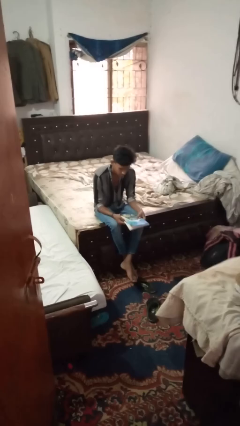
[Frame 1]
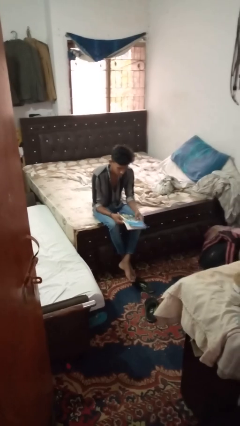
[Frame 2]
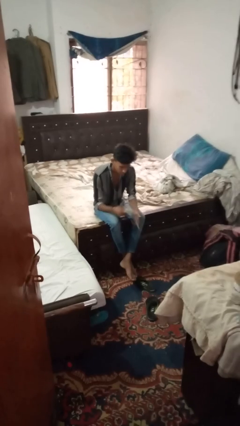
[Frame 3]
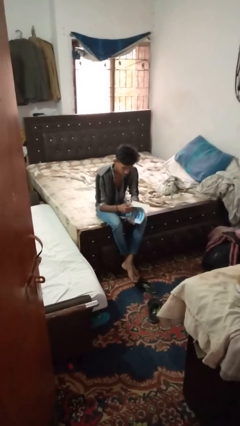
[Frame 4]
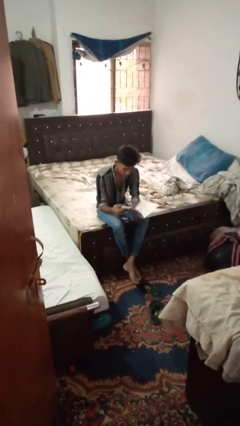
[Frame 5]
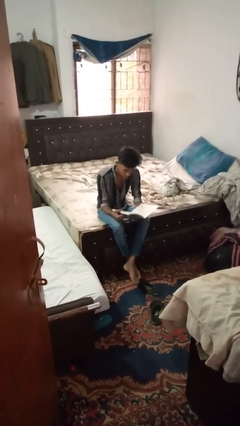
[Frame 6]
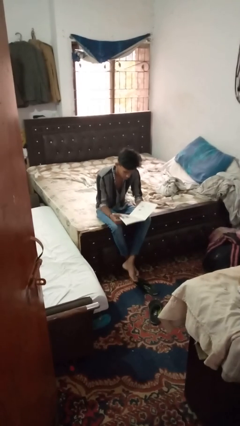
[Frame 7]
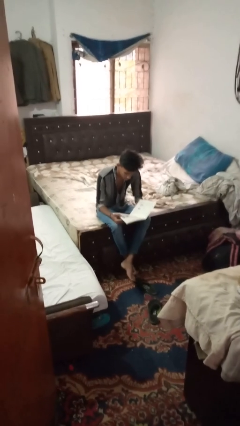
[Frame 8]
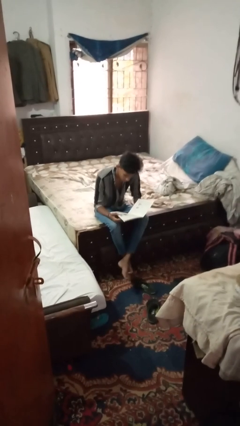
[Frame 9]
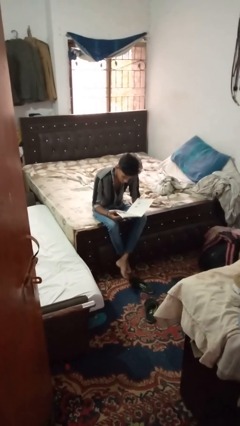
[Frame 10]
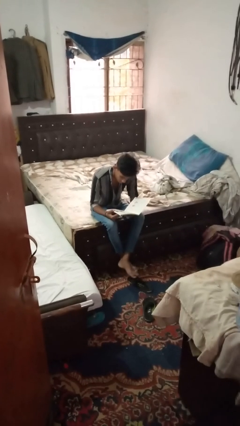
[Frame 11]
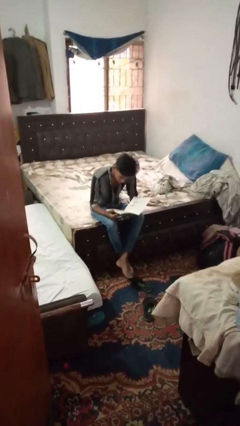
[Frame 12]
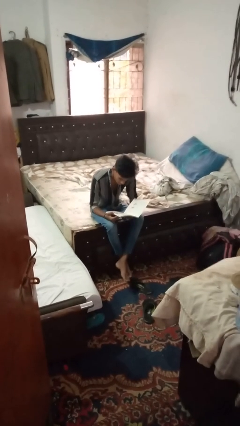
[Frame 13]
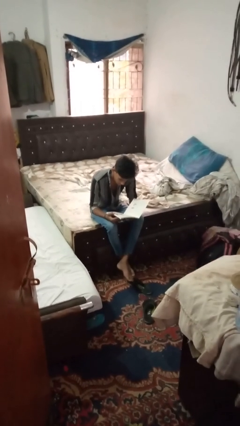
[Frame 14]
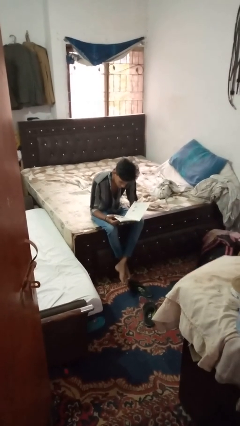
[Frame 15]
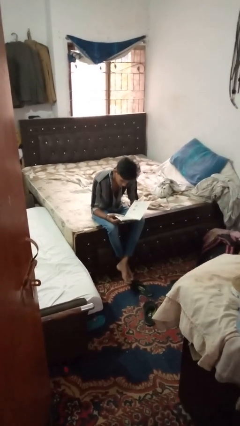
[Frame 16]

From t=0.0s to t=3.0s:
person reads book

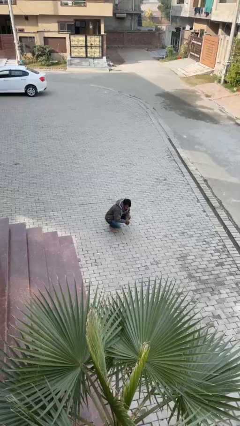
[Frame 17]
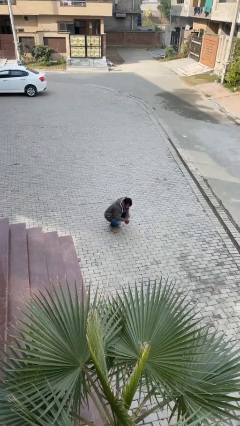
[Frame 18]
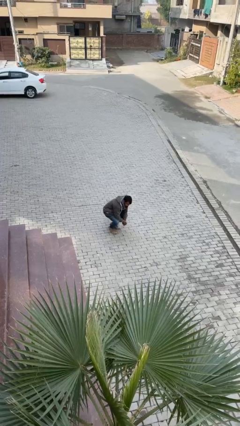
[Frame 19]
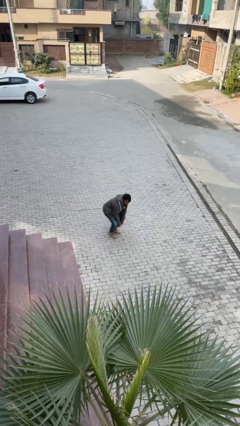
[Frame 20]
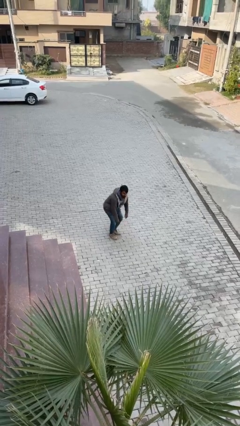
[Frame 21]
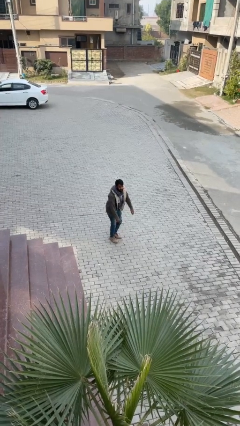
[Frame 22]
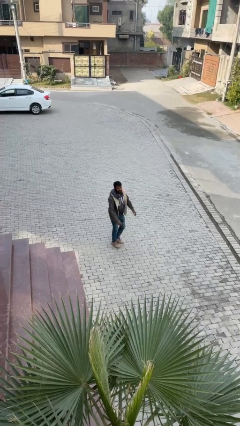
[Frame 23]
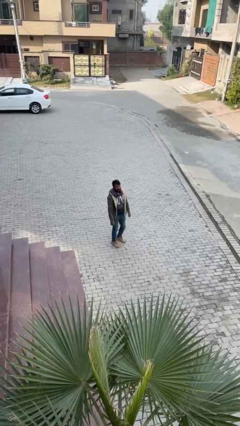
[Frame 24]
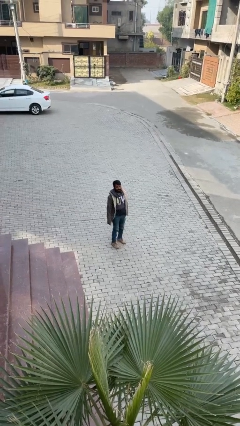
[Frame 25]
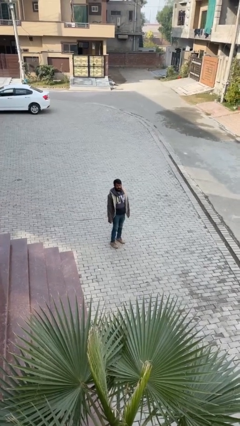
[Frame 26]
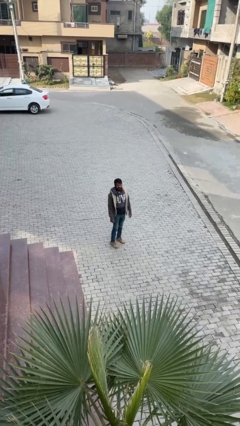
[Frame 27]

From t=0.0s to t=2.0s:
person stands up

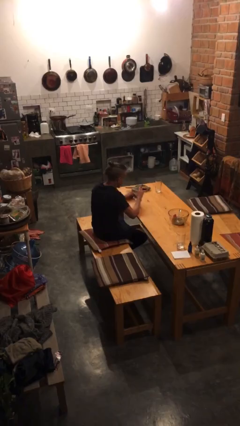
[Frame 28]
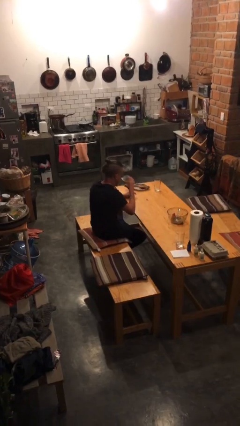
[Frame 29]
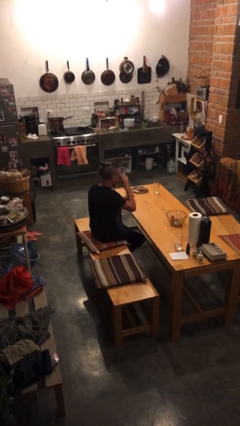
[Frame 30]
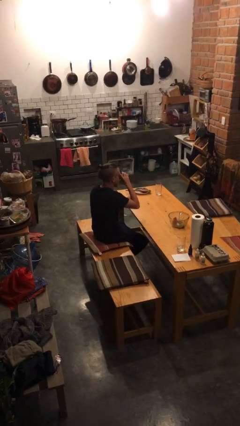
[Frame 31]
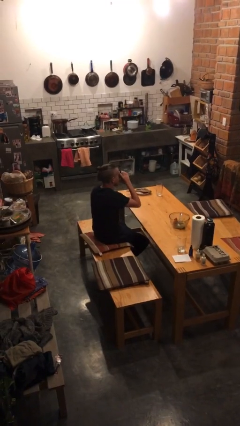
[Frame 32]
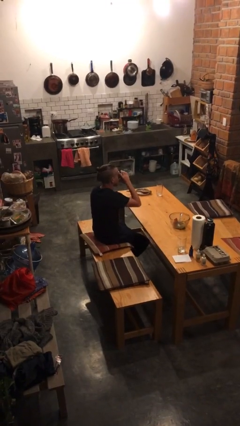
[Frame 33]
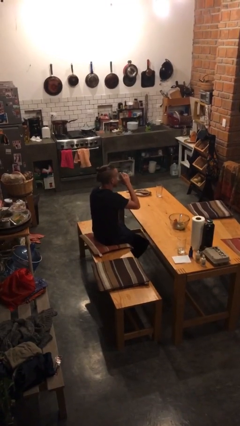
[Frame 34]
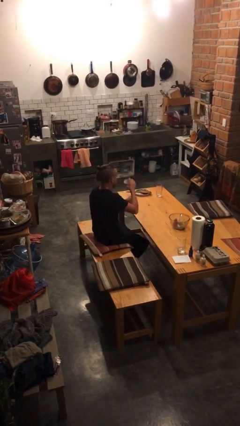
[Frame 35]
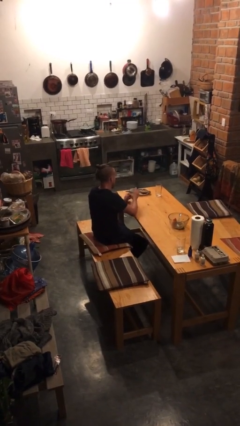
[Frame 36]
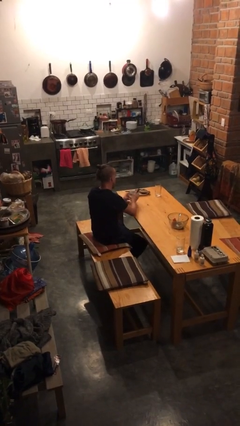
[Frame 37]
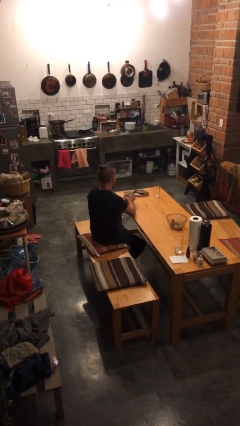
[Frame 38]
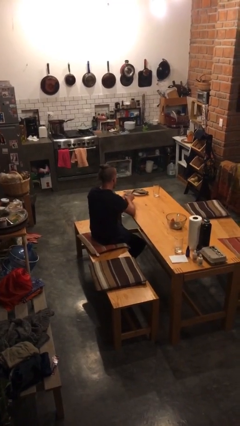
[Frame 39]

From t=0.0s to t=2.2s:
person drinks from mug

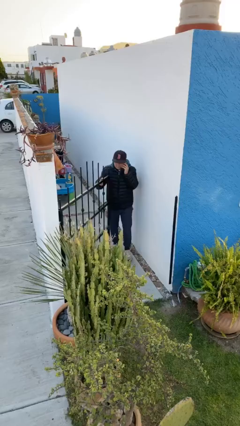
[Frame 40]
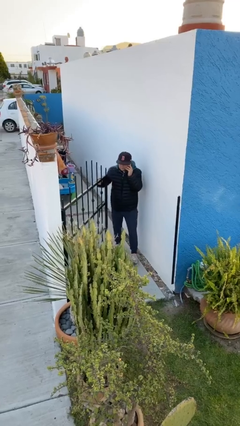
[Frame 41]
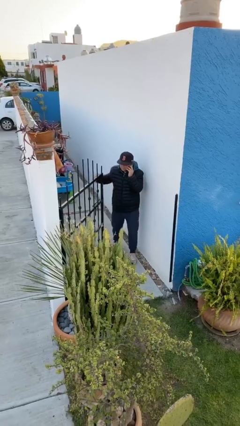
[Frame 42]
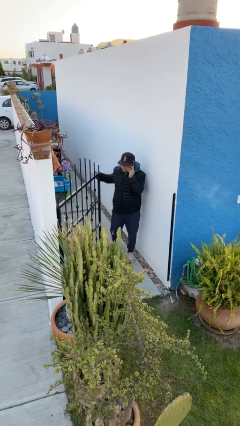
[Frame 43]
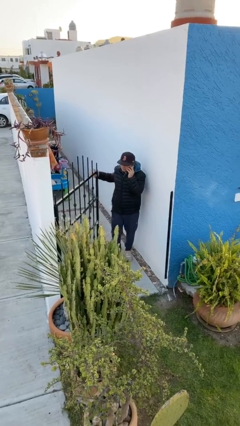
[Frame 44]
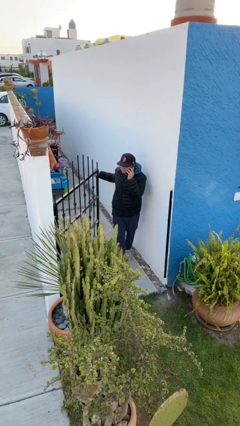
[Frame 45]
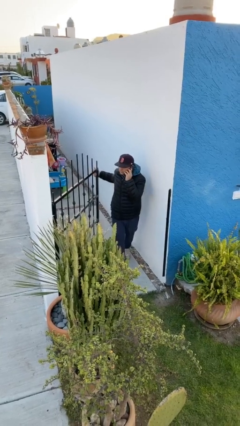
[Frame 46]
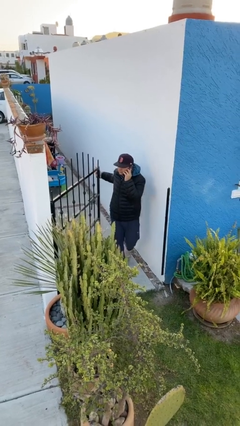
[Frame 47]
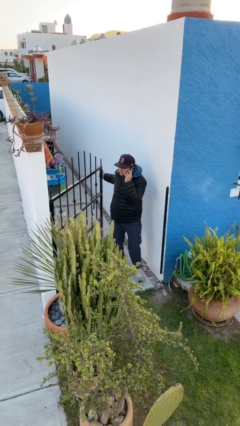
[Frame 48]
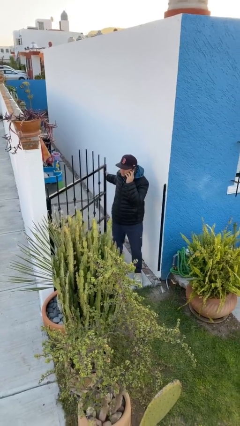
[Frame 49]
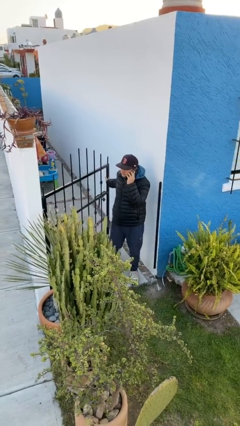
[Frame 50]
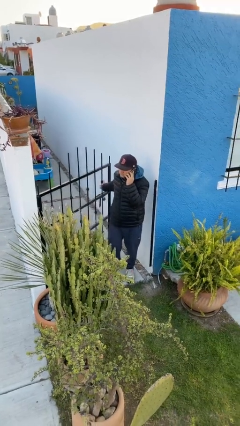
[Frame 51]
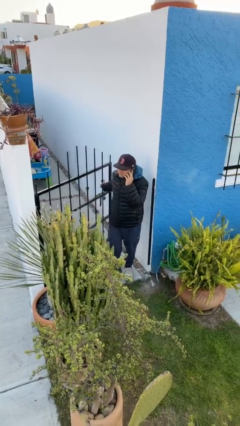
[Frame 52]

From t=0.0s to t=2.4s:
person enters scene through structure

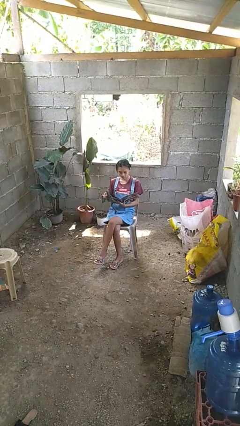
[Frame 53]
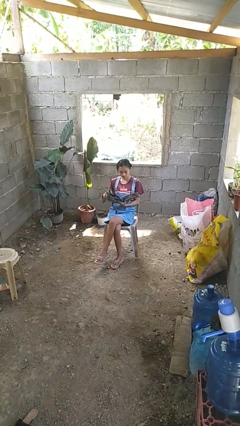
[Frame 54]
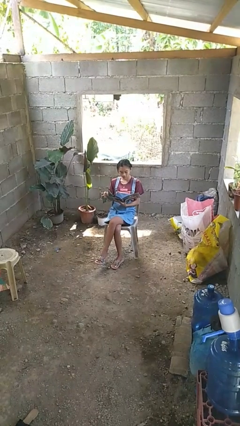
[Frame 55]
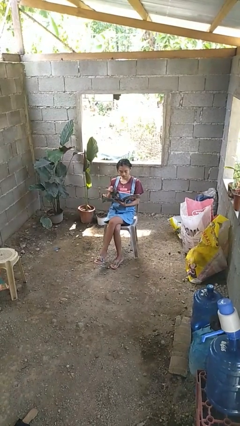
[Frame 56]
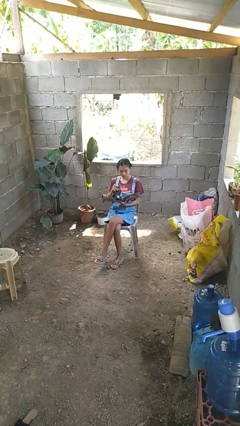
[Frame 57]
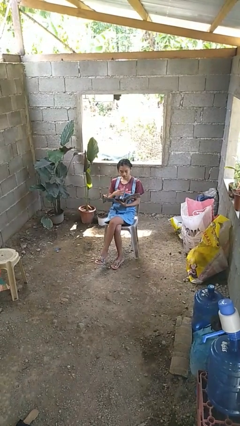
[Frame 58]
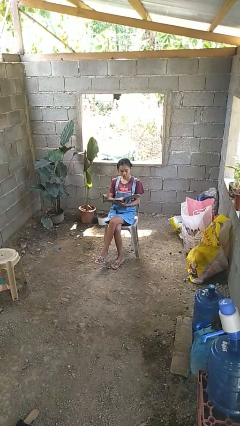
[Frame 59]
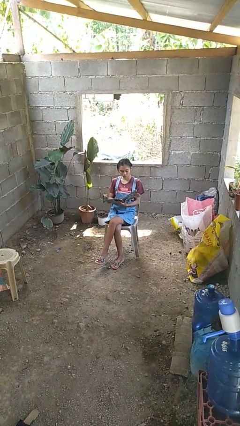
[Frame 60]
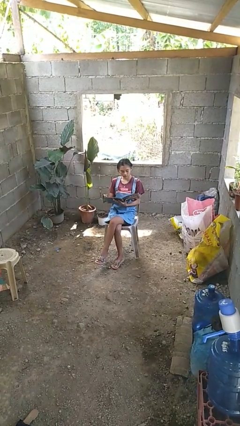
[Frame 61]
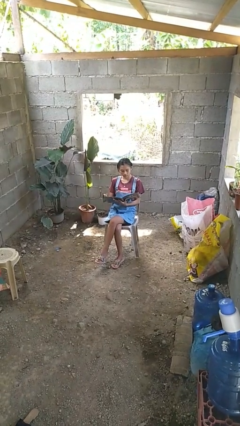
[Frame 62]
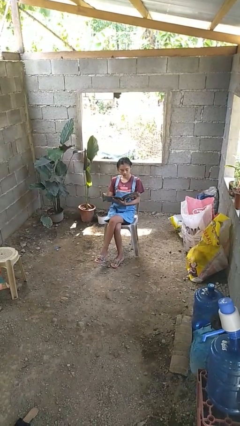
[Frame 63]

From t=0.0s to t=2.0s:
person reads magazine

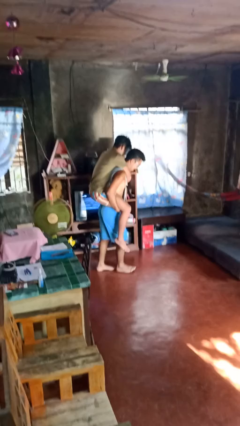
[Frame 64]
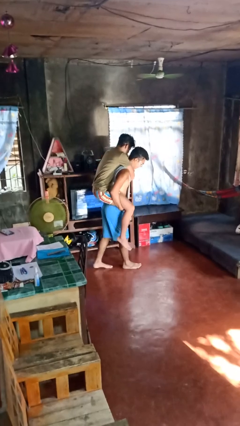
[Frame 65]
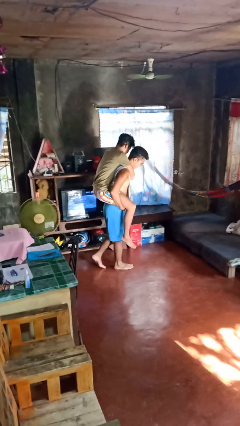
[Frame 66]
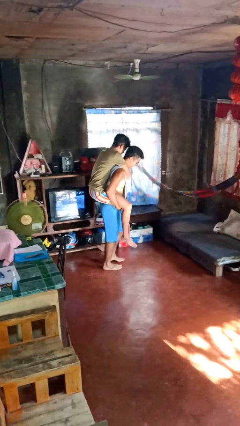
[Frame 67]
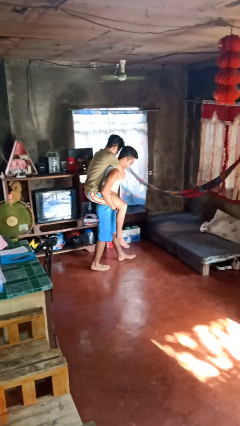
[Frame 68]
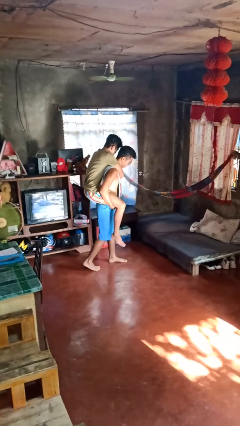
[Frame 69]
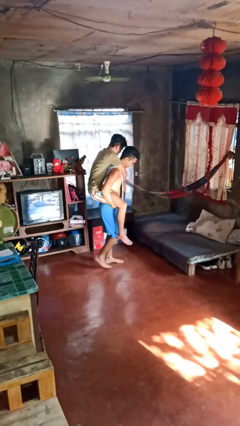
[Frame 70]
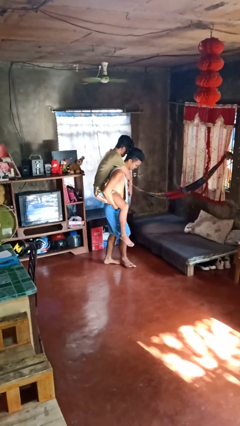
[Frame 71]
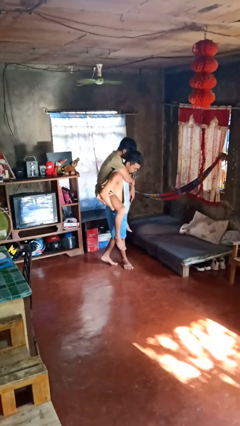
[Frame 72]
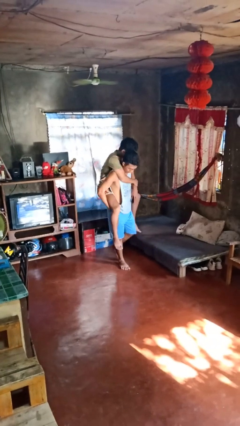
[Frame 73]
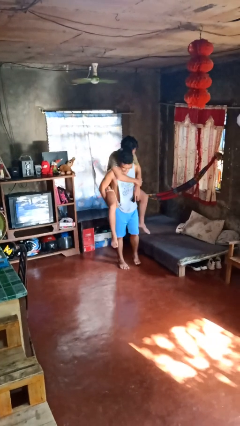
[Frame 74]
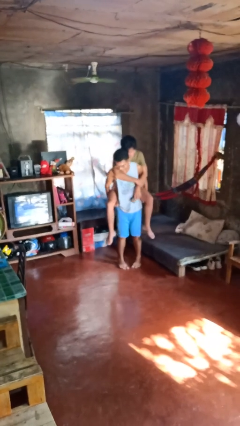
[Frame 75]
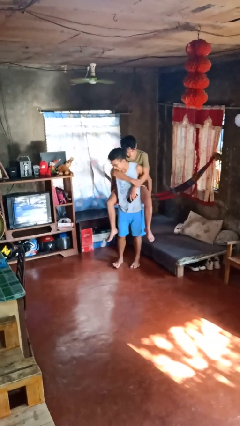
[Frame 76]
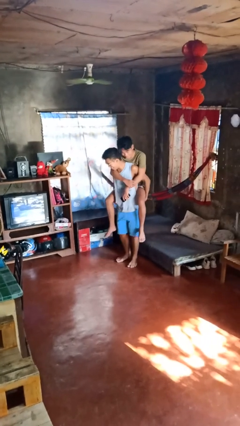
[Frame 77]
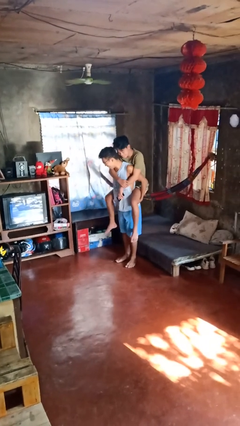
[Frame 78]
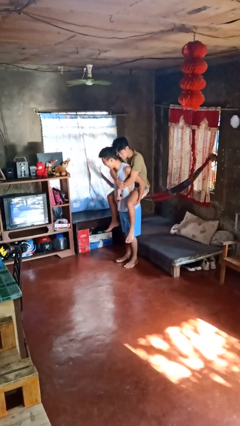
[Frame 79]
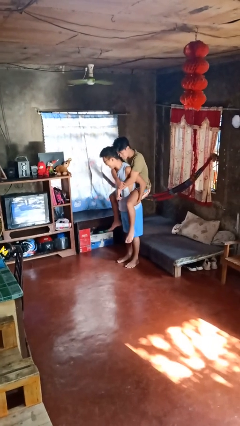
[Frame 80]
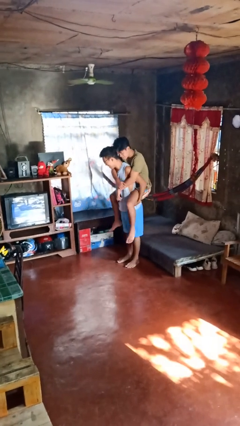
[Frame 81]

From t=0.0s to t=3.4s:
person carries person on back

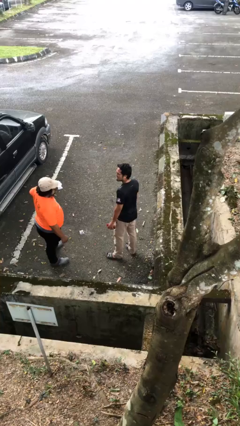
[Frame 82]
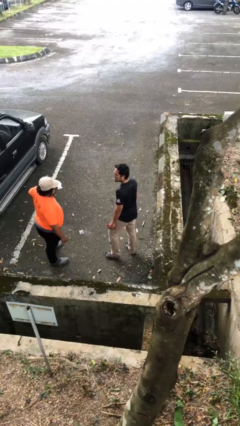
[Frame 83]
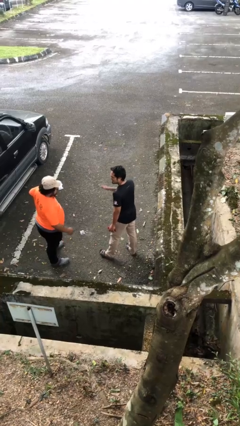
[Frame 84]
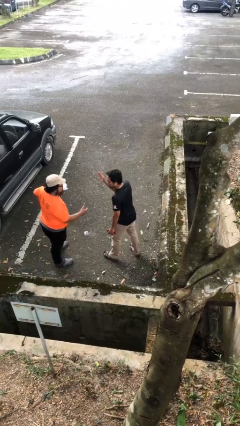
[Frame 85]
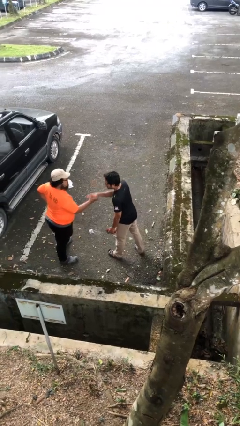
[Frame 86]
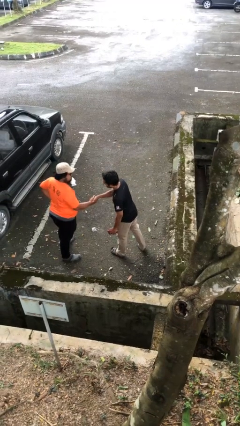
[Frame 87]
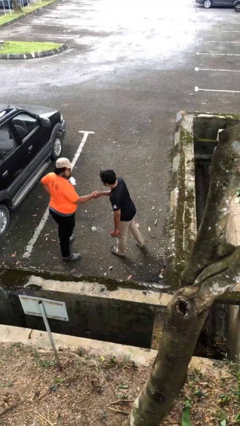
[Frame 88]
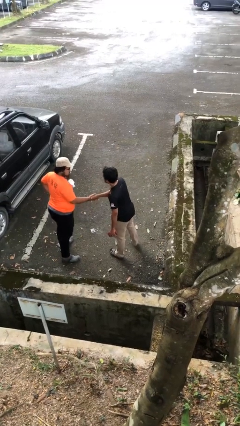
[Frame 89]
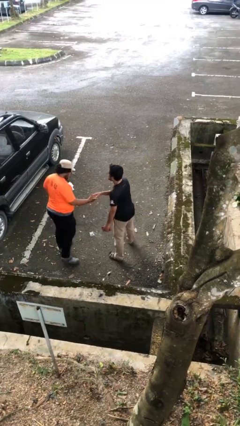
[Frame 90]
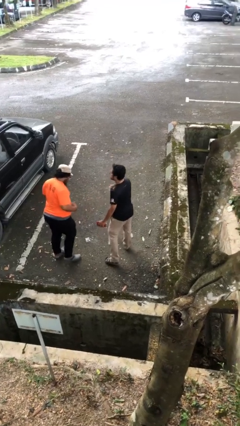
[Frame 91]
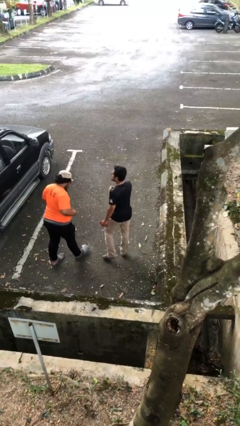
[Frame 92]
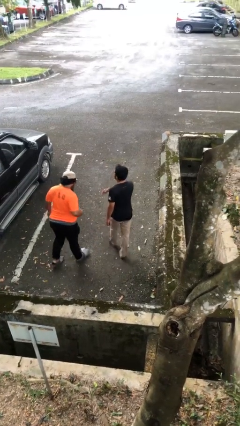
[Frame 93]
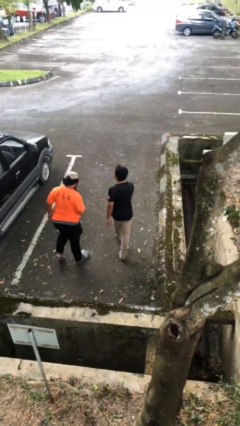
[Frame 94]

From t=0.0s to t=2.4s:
person shakes hand
